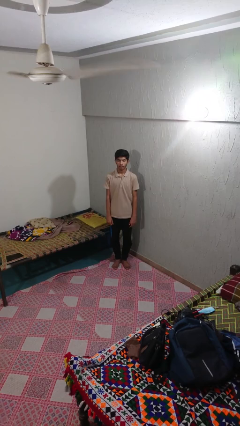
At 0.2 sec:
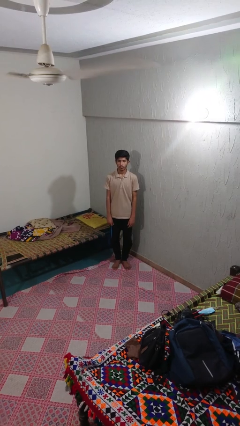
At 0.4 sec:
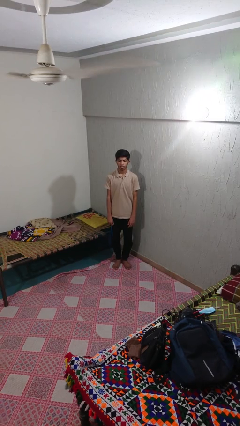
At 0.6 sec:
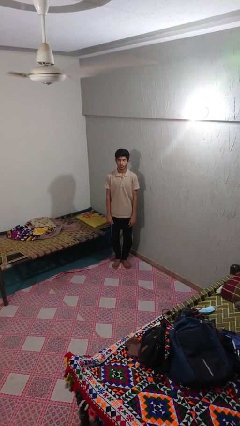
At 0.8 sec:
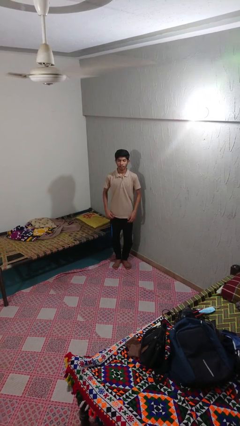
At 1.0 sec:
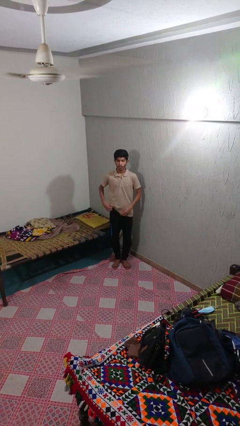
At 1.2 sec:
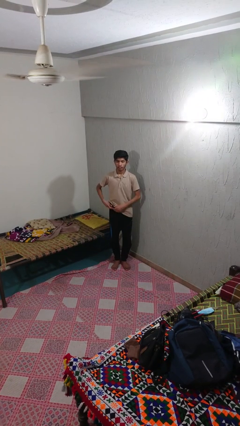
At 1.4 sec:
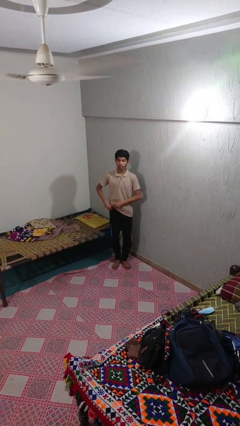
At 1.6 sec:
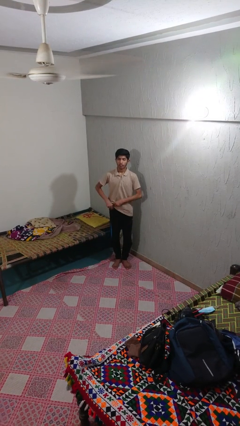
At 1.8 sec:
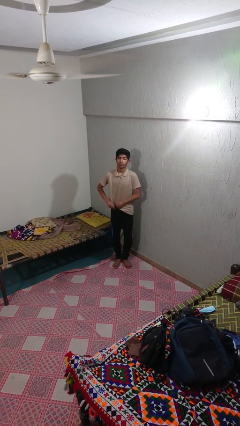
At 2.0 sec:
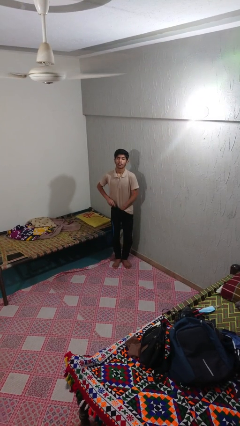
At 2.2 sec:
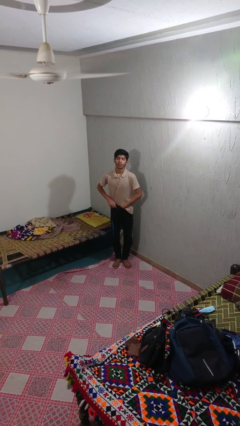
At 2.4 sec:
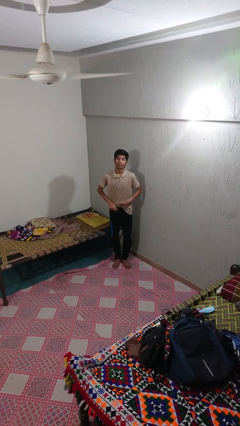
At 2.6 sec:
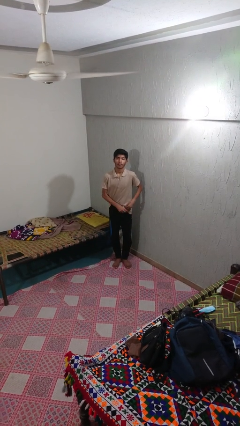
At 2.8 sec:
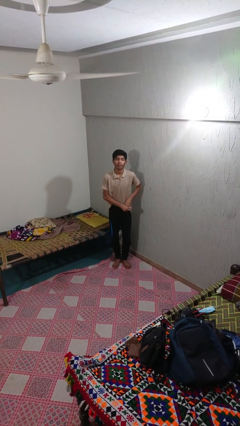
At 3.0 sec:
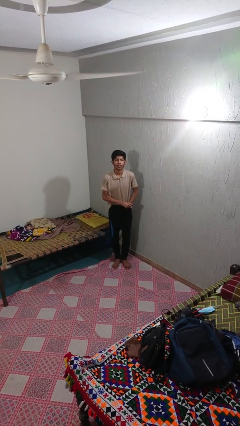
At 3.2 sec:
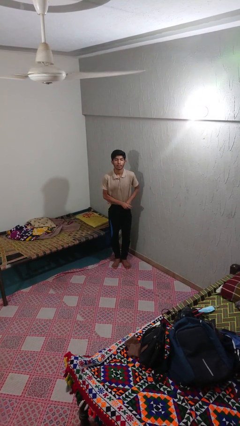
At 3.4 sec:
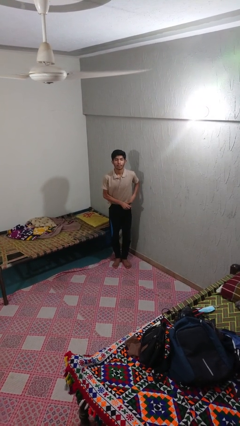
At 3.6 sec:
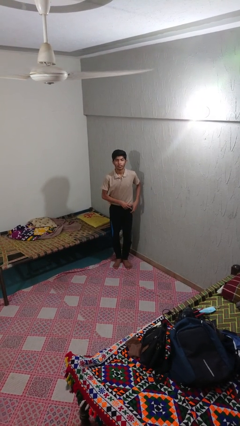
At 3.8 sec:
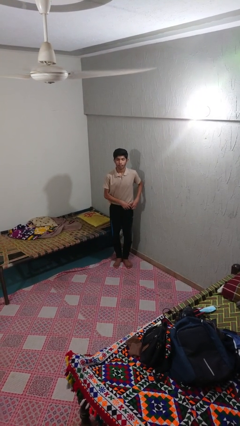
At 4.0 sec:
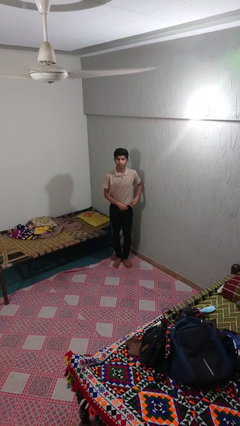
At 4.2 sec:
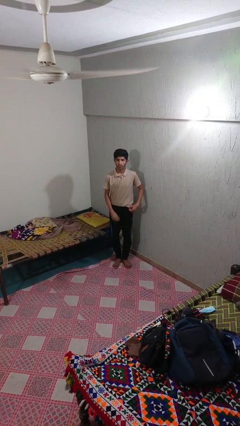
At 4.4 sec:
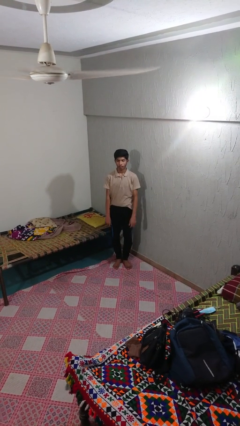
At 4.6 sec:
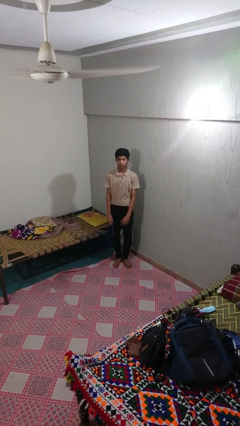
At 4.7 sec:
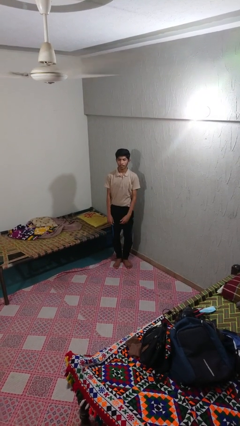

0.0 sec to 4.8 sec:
person tucks in shirt

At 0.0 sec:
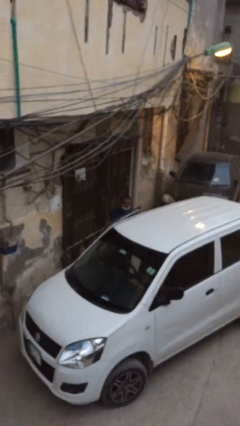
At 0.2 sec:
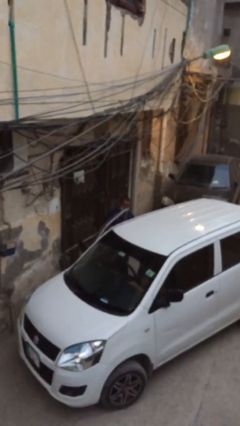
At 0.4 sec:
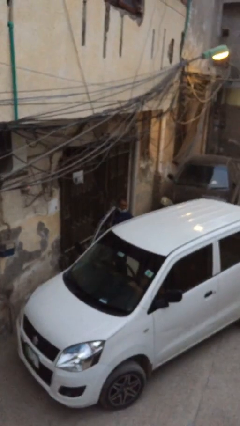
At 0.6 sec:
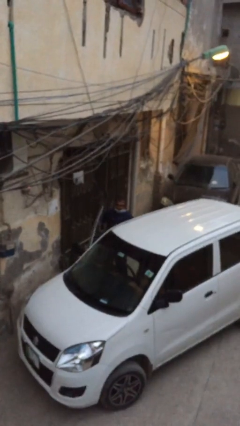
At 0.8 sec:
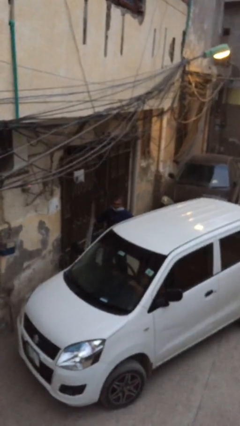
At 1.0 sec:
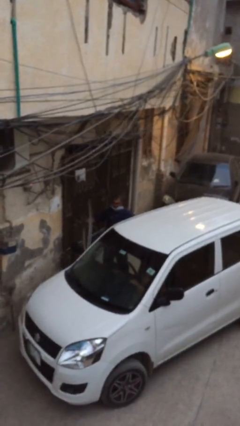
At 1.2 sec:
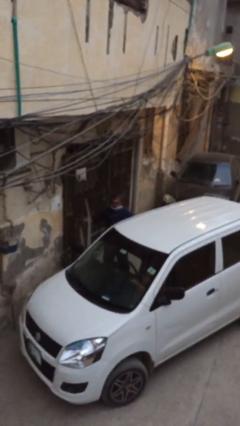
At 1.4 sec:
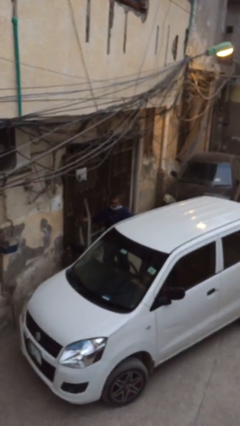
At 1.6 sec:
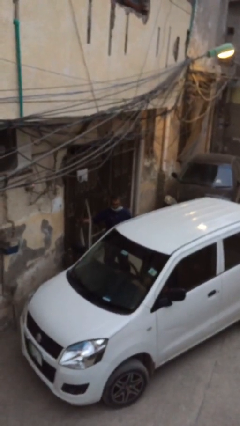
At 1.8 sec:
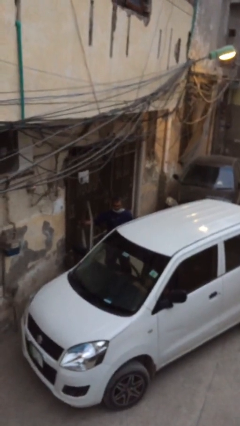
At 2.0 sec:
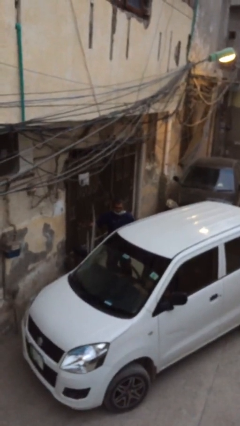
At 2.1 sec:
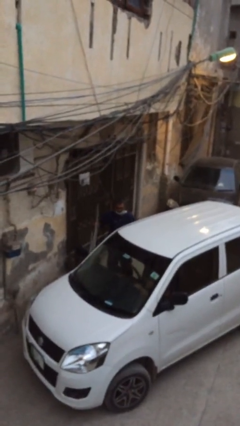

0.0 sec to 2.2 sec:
person opens car door

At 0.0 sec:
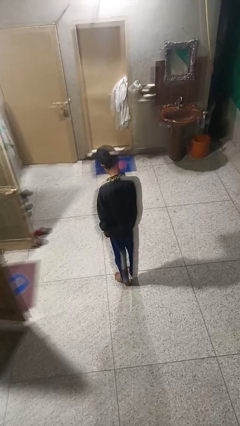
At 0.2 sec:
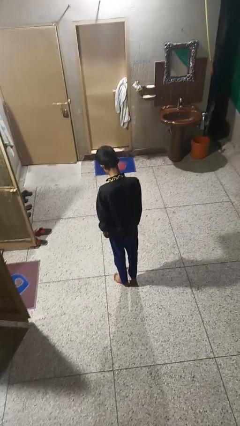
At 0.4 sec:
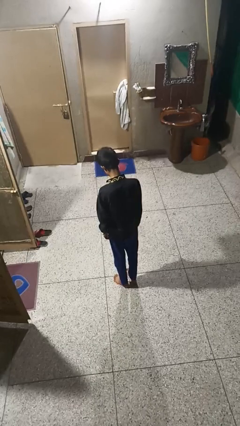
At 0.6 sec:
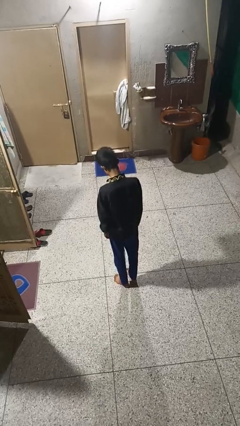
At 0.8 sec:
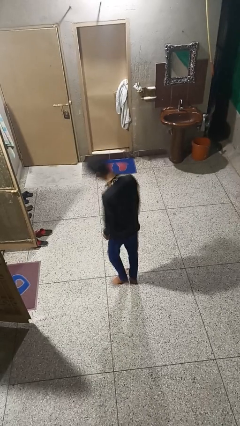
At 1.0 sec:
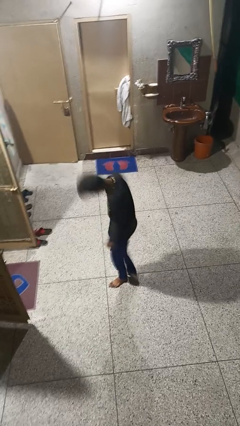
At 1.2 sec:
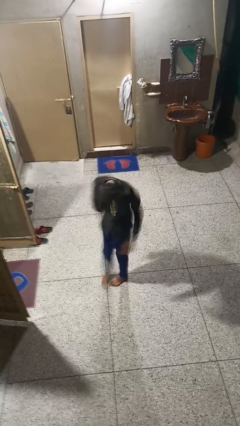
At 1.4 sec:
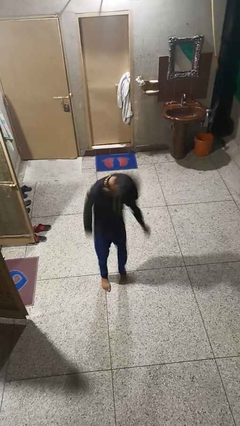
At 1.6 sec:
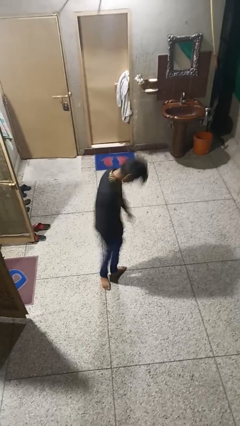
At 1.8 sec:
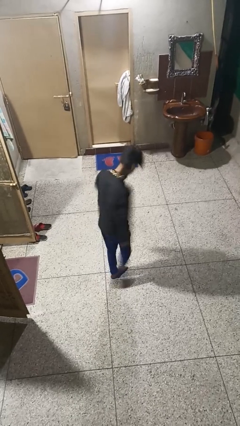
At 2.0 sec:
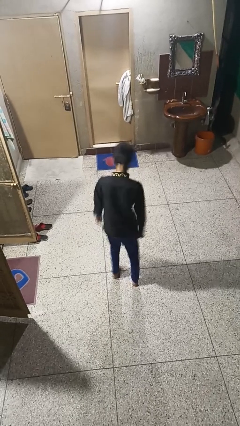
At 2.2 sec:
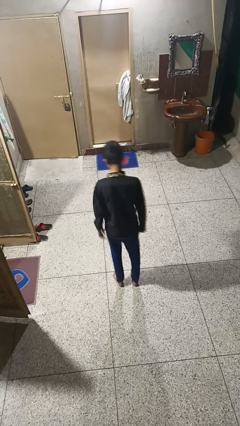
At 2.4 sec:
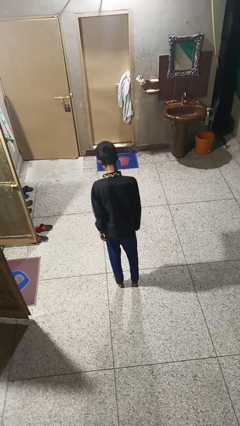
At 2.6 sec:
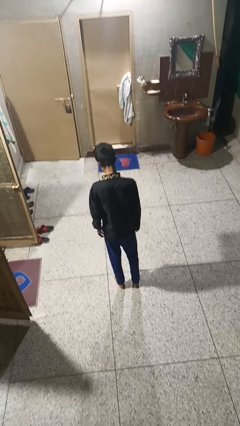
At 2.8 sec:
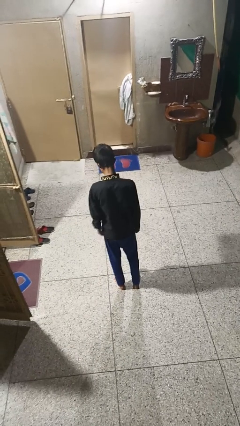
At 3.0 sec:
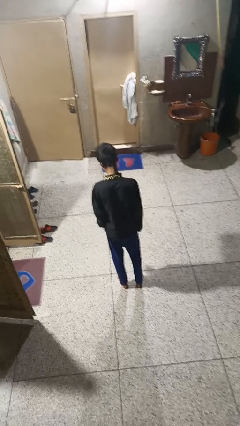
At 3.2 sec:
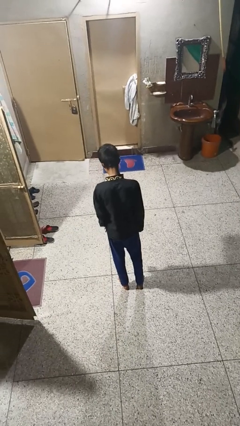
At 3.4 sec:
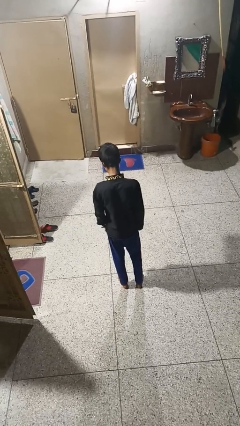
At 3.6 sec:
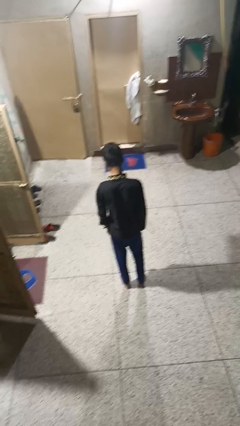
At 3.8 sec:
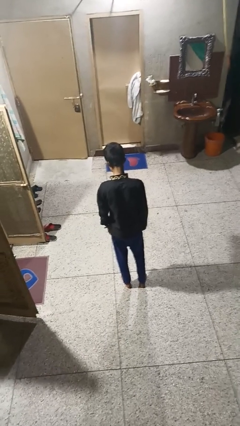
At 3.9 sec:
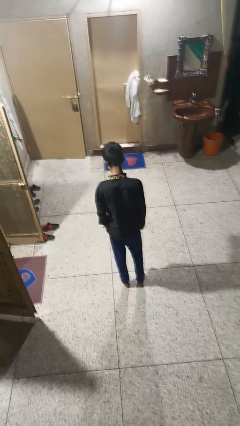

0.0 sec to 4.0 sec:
person twirls

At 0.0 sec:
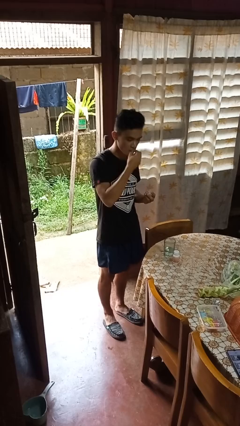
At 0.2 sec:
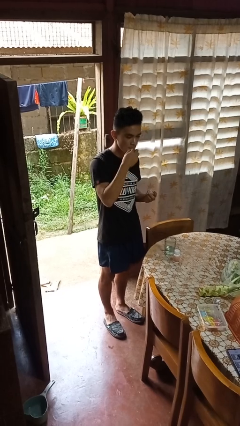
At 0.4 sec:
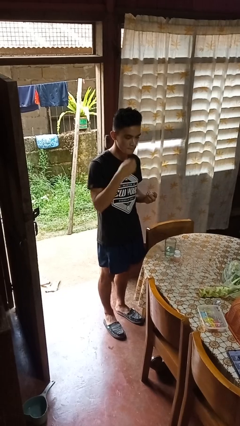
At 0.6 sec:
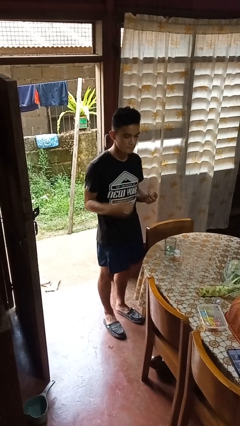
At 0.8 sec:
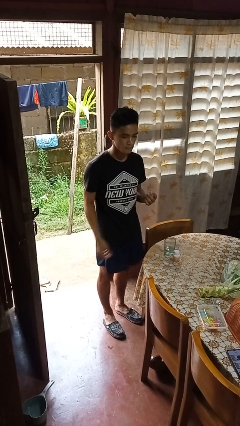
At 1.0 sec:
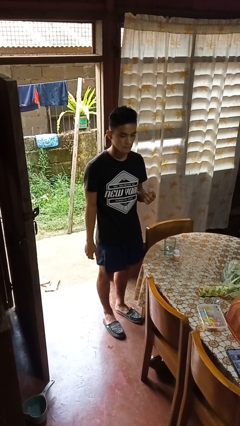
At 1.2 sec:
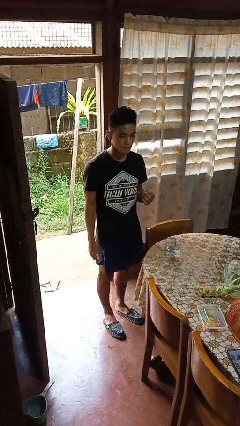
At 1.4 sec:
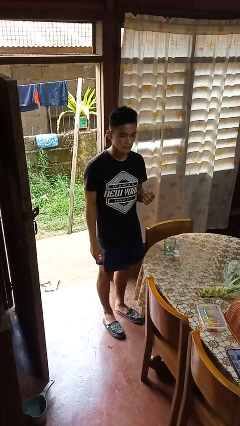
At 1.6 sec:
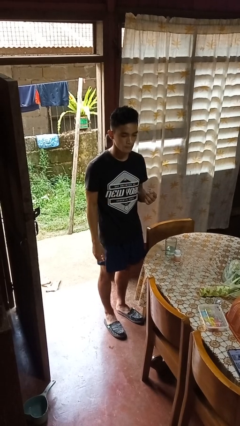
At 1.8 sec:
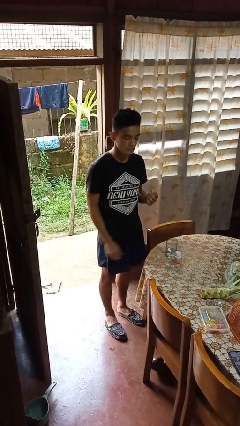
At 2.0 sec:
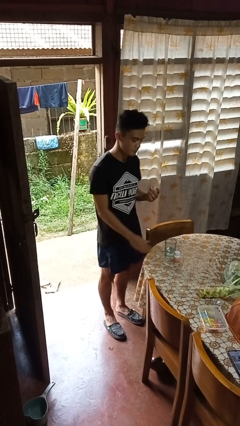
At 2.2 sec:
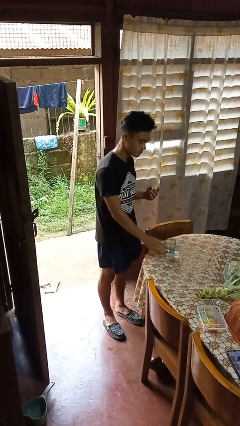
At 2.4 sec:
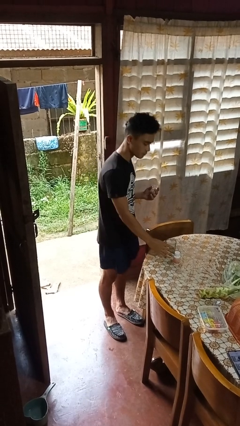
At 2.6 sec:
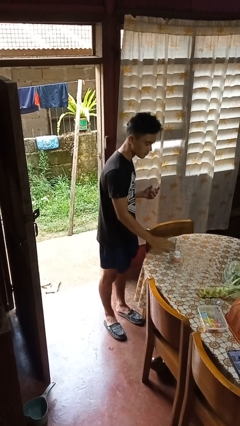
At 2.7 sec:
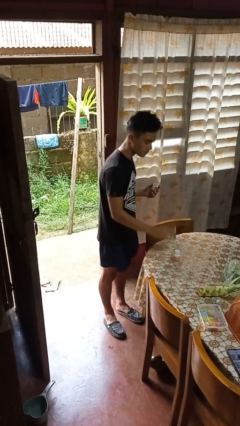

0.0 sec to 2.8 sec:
person takes medicine pills

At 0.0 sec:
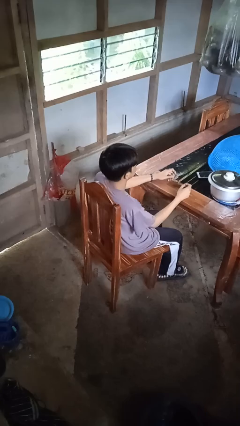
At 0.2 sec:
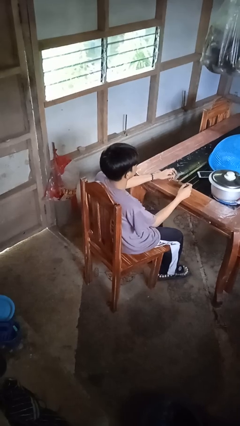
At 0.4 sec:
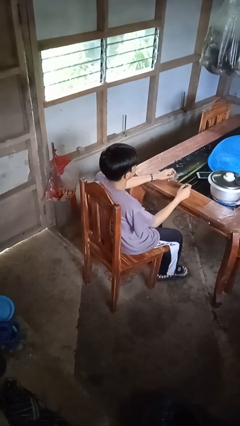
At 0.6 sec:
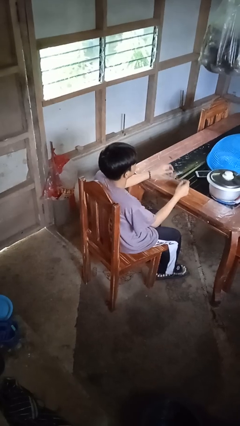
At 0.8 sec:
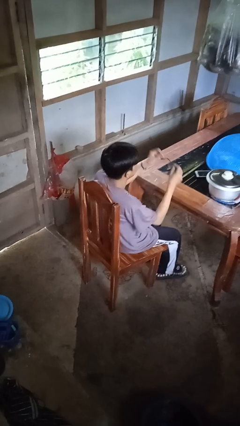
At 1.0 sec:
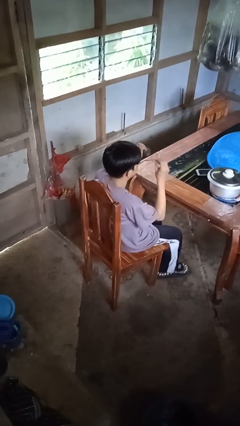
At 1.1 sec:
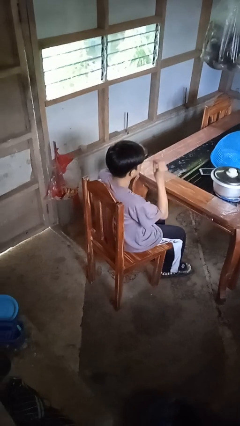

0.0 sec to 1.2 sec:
person puts on glasses

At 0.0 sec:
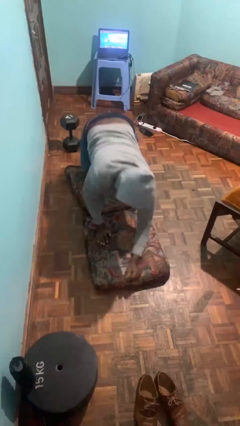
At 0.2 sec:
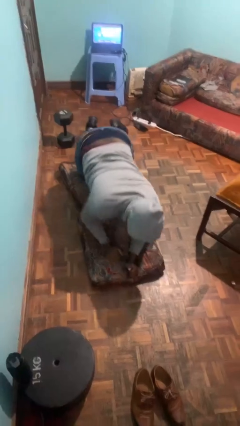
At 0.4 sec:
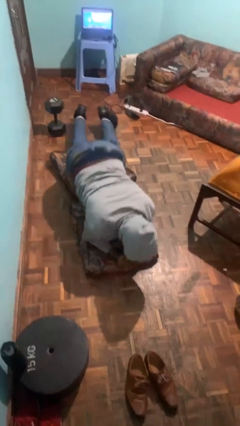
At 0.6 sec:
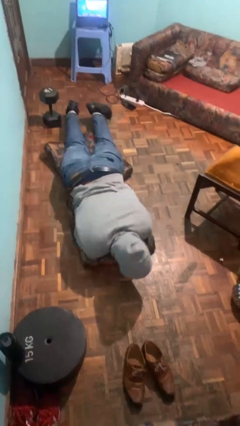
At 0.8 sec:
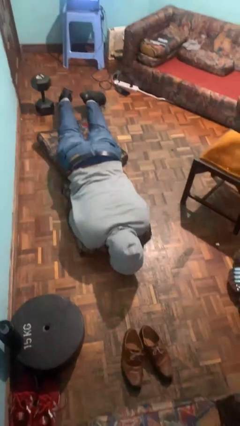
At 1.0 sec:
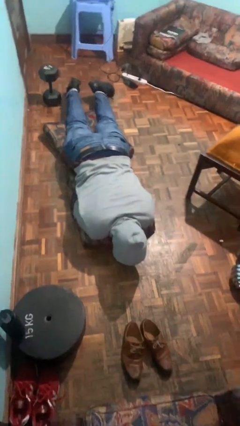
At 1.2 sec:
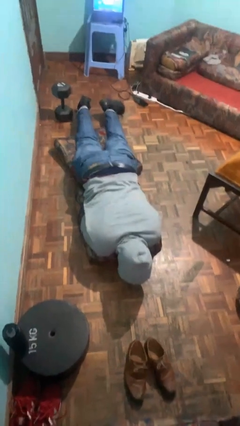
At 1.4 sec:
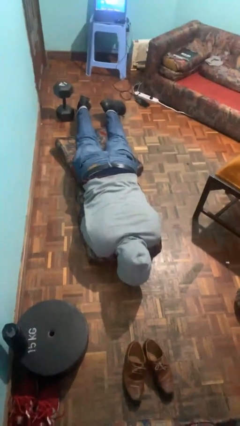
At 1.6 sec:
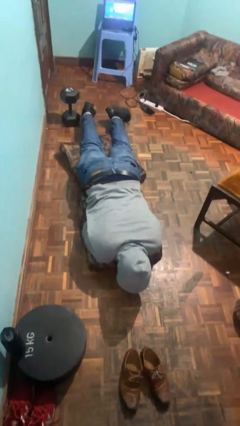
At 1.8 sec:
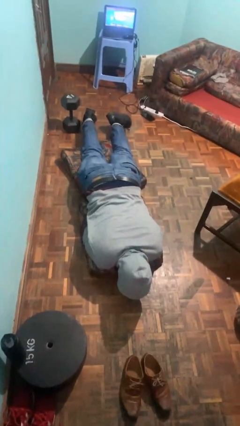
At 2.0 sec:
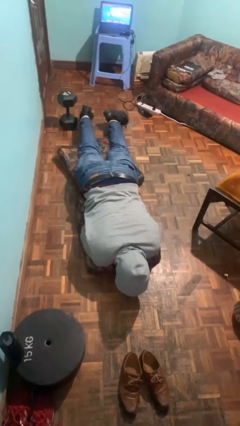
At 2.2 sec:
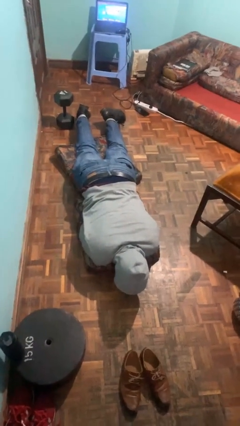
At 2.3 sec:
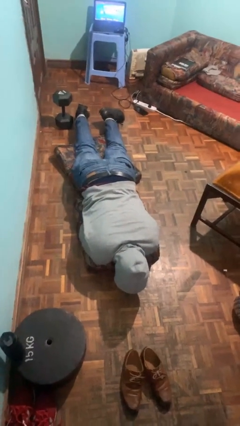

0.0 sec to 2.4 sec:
person lies down on floor

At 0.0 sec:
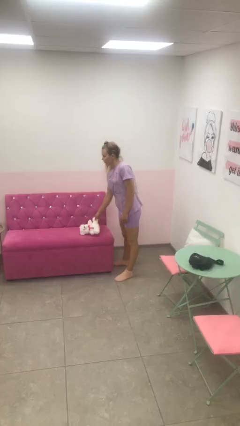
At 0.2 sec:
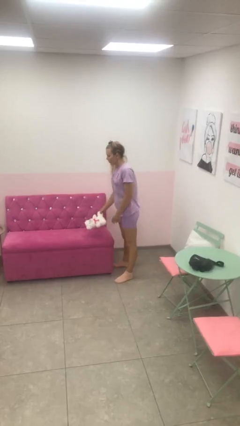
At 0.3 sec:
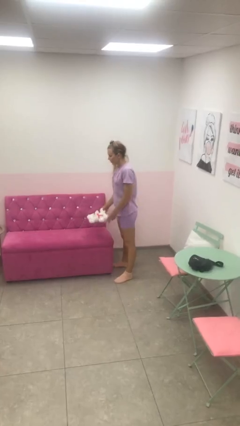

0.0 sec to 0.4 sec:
person picks up object from couch
